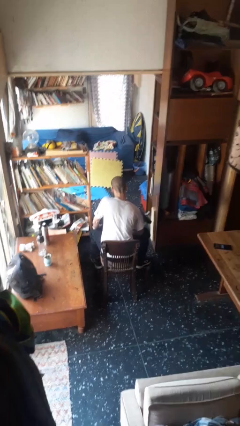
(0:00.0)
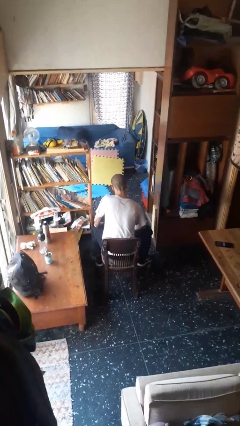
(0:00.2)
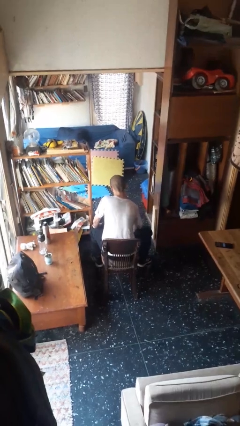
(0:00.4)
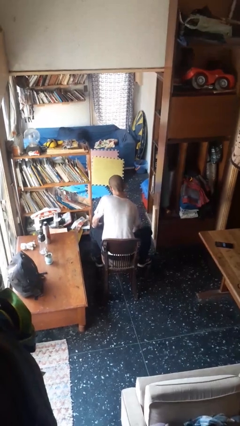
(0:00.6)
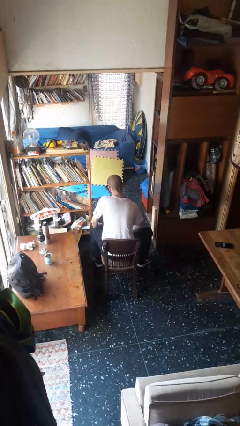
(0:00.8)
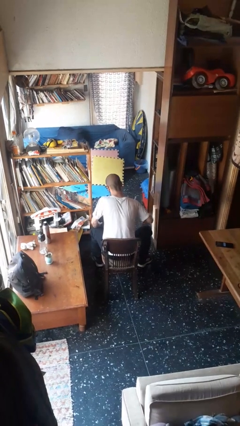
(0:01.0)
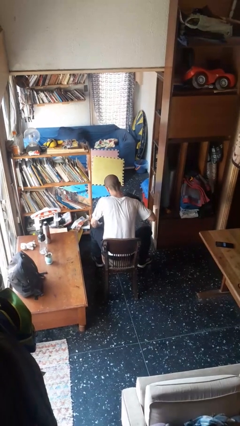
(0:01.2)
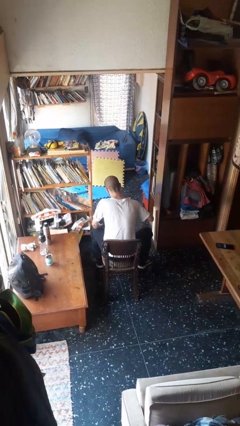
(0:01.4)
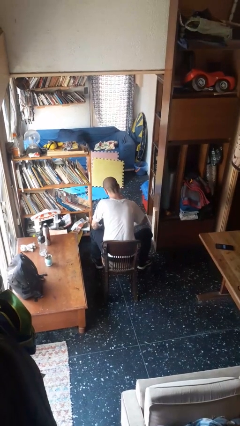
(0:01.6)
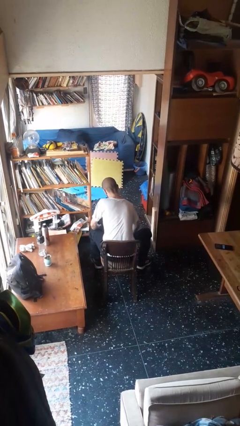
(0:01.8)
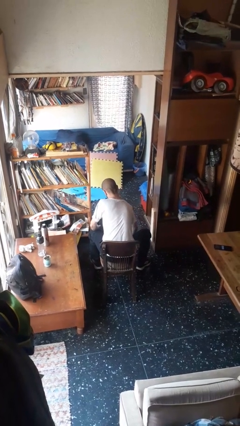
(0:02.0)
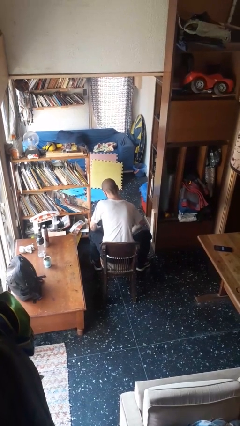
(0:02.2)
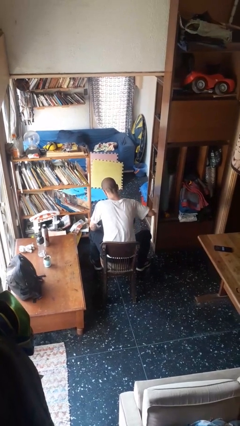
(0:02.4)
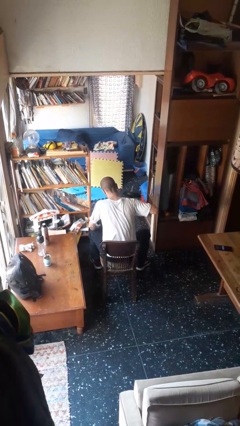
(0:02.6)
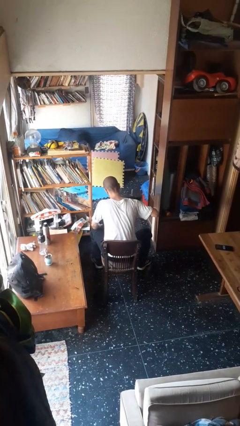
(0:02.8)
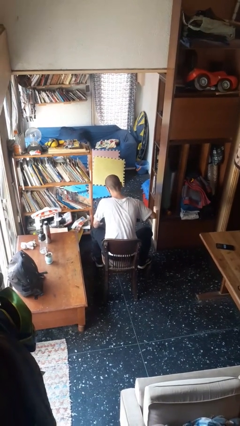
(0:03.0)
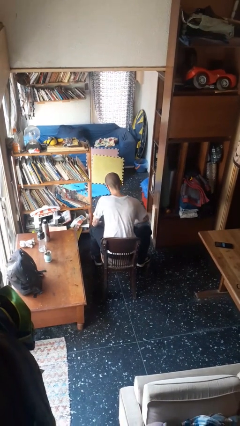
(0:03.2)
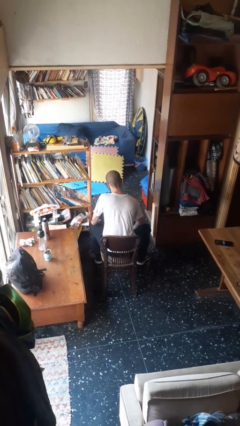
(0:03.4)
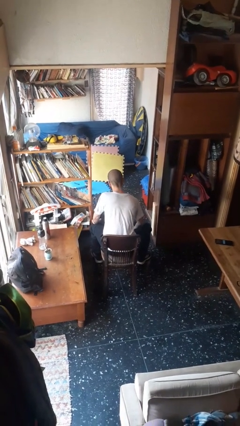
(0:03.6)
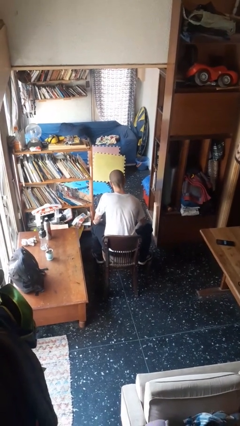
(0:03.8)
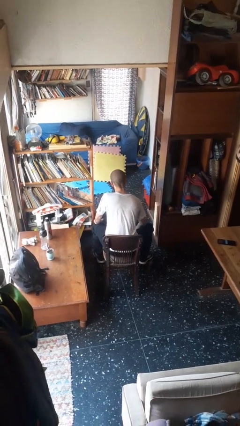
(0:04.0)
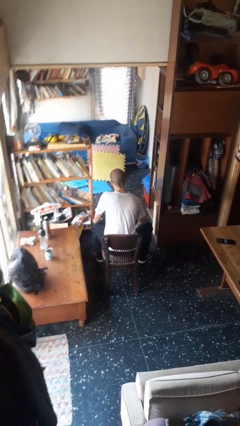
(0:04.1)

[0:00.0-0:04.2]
person lifts dumbbells

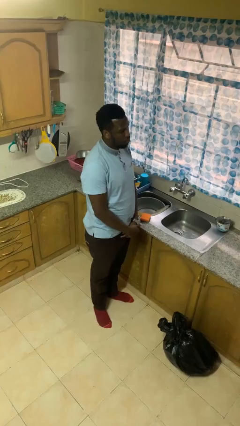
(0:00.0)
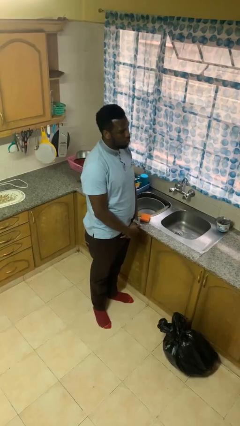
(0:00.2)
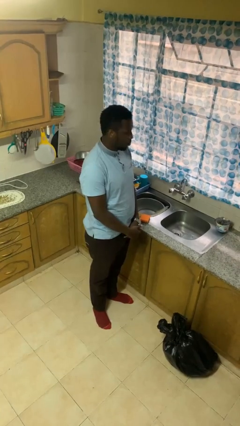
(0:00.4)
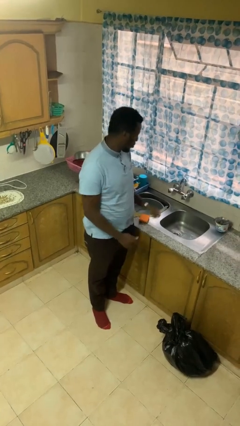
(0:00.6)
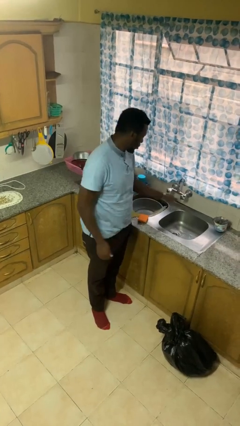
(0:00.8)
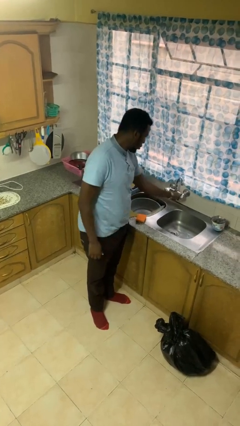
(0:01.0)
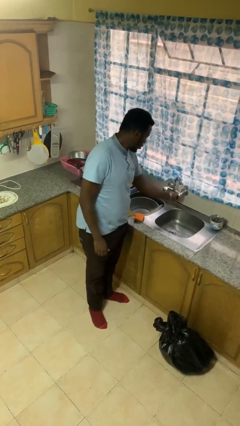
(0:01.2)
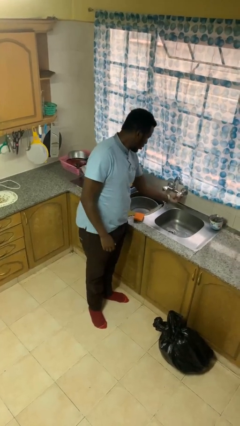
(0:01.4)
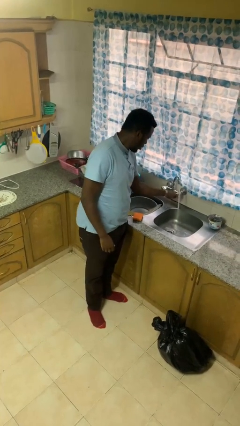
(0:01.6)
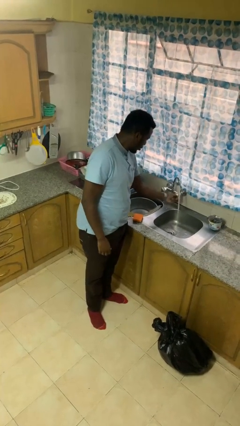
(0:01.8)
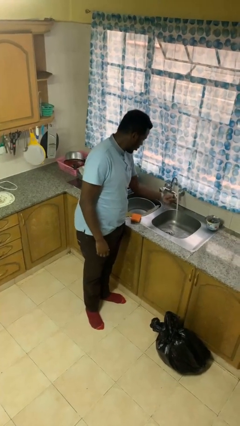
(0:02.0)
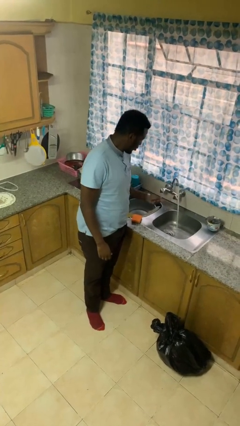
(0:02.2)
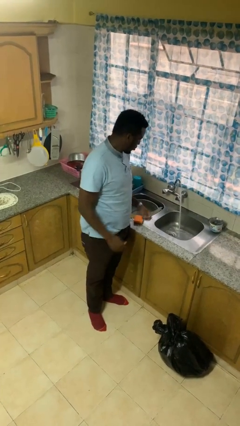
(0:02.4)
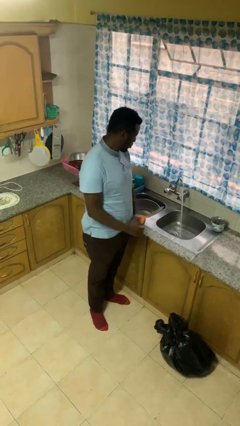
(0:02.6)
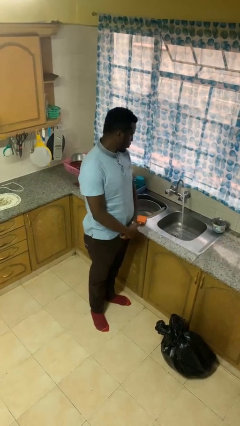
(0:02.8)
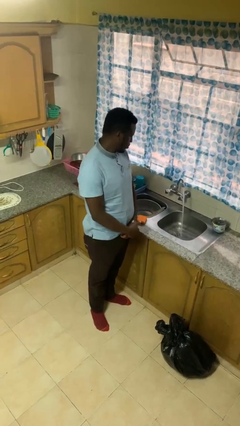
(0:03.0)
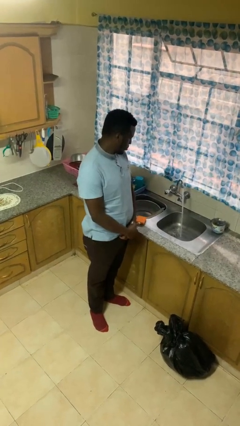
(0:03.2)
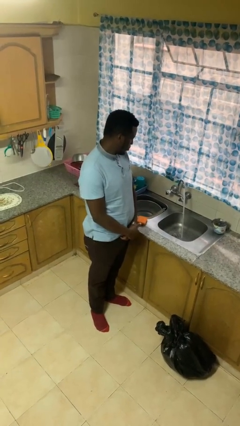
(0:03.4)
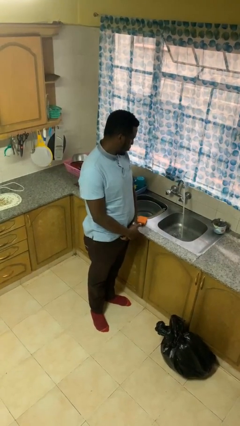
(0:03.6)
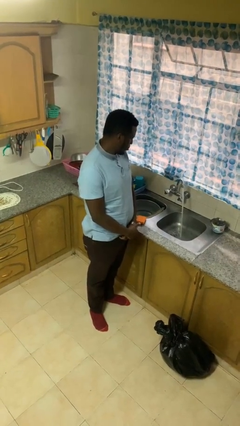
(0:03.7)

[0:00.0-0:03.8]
person turns on faucet

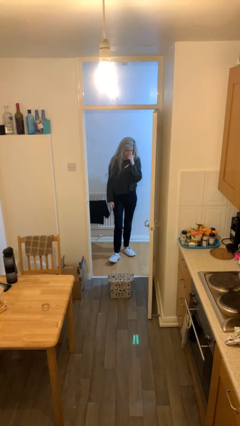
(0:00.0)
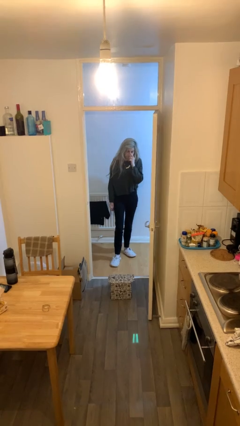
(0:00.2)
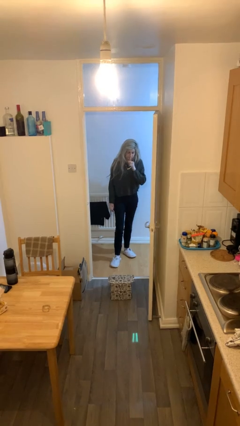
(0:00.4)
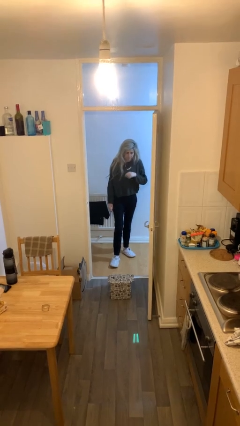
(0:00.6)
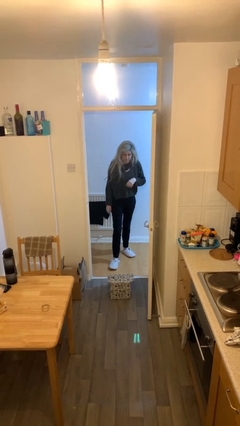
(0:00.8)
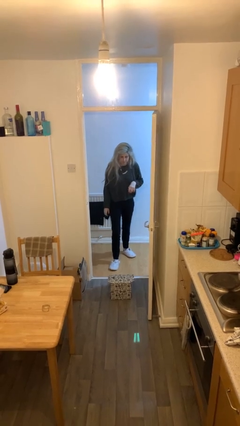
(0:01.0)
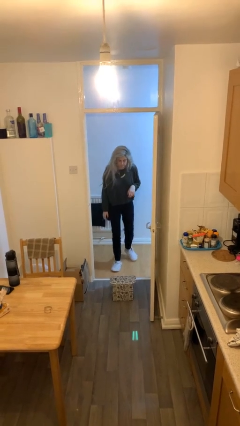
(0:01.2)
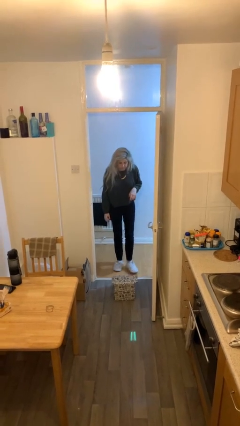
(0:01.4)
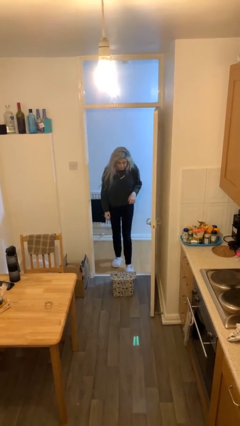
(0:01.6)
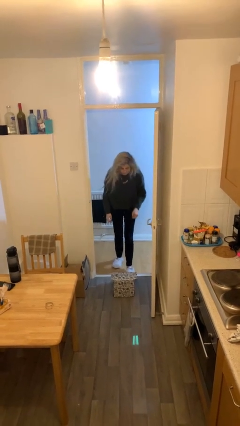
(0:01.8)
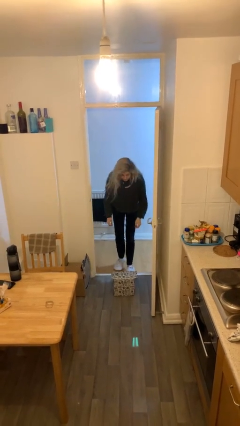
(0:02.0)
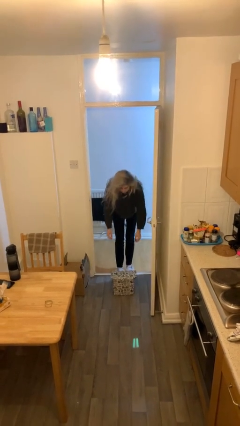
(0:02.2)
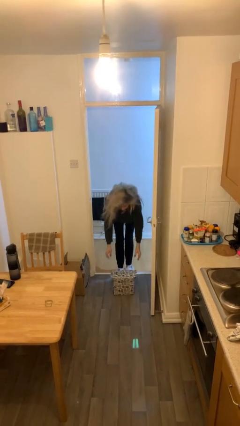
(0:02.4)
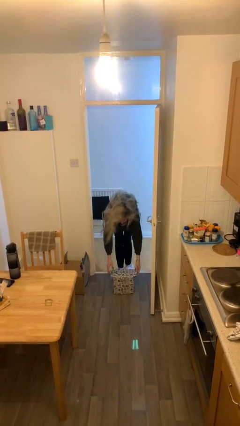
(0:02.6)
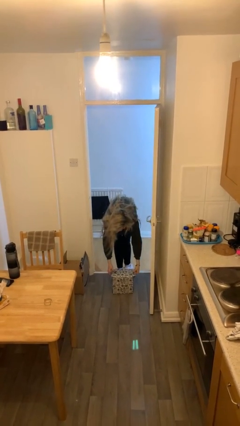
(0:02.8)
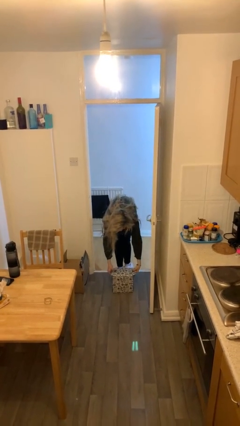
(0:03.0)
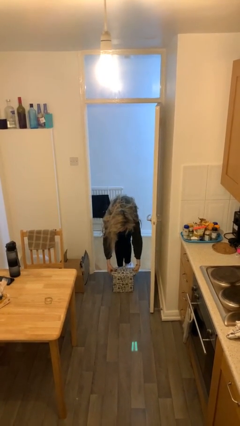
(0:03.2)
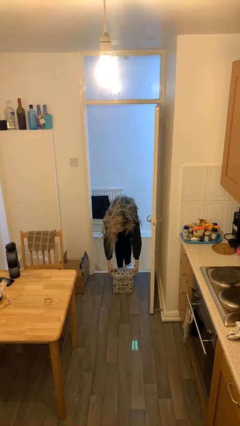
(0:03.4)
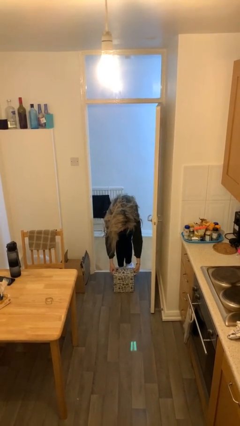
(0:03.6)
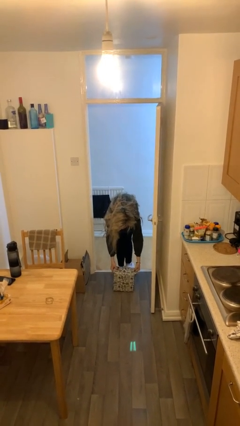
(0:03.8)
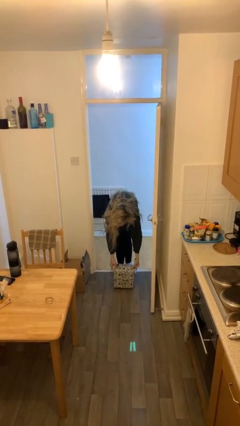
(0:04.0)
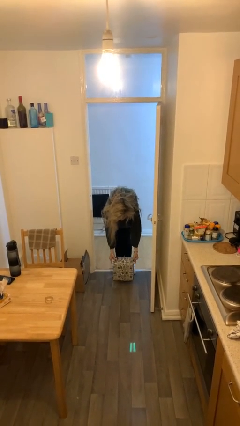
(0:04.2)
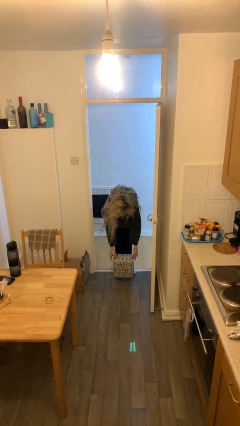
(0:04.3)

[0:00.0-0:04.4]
person picks up object from floor

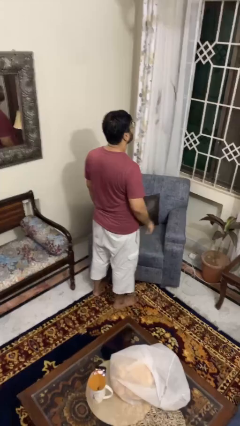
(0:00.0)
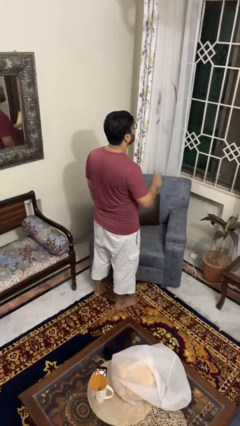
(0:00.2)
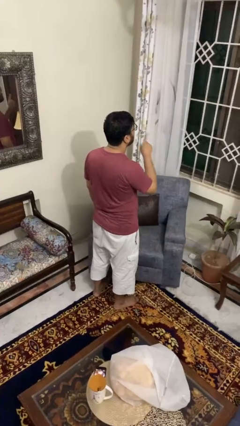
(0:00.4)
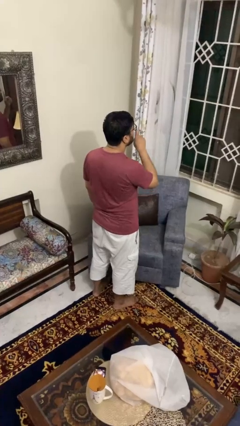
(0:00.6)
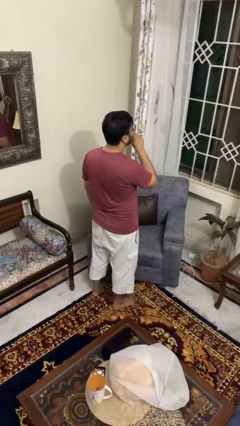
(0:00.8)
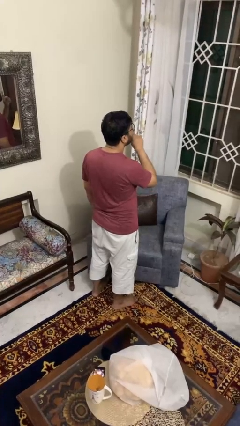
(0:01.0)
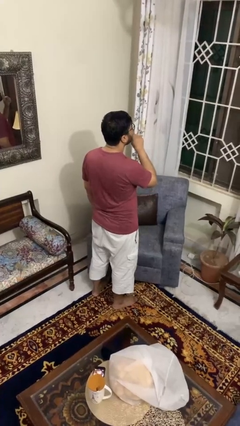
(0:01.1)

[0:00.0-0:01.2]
person gestures be quiet

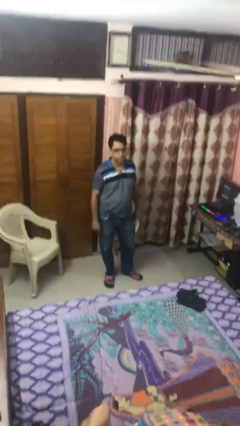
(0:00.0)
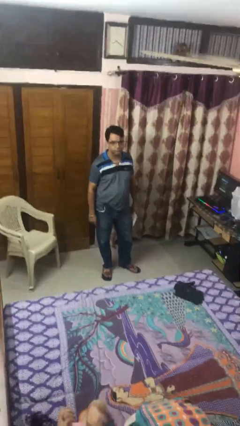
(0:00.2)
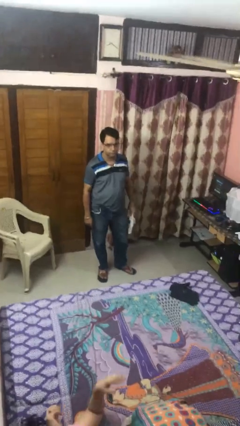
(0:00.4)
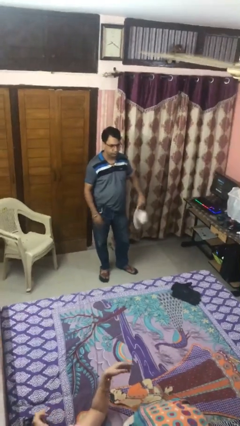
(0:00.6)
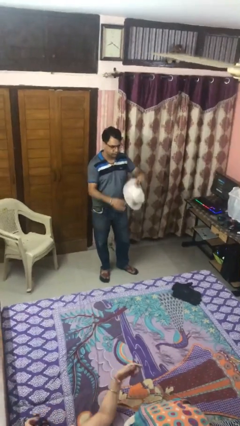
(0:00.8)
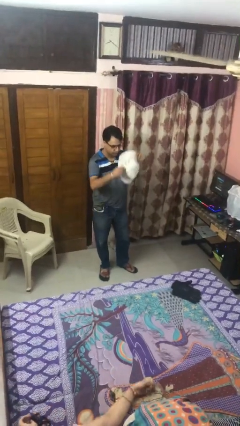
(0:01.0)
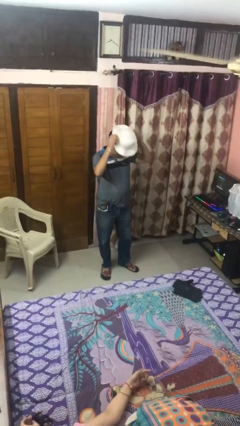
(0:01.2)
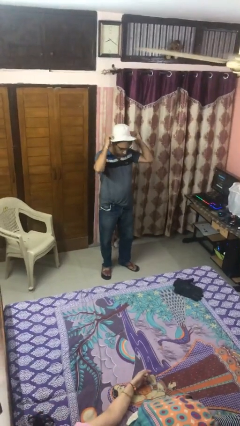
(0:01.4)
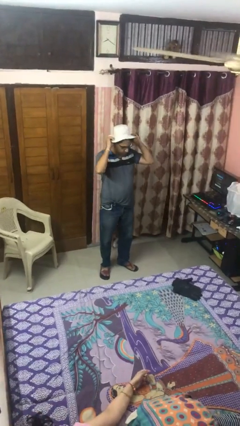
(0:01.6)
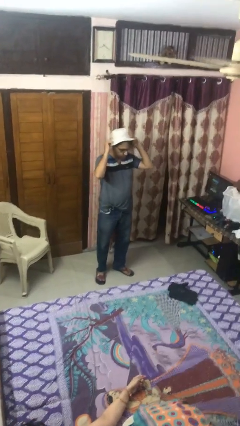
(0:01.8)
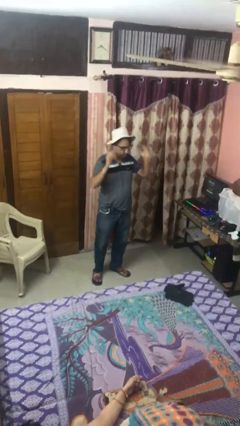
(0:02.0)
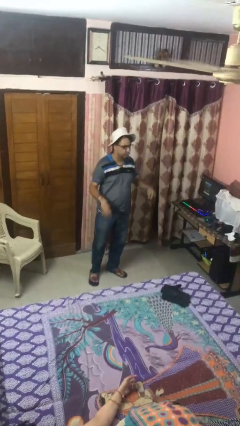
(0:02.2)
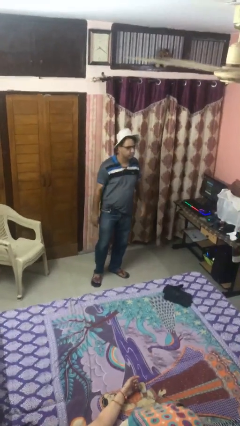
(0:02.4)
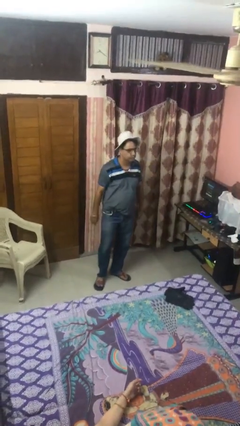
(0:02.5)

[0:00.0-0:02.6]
person puts on hat

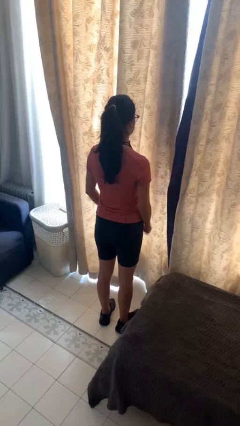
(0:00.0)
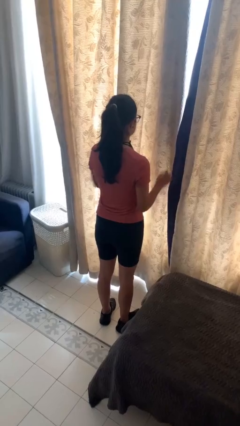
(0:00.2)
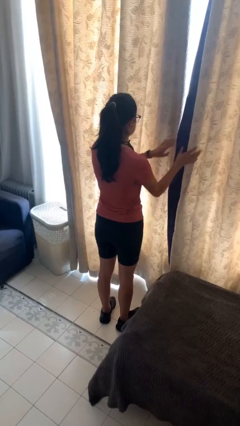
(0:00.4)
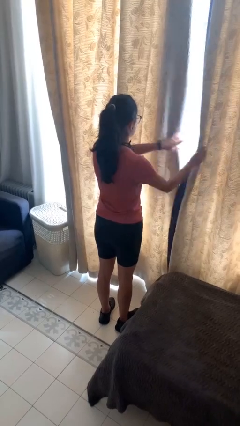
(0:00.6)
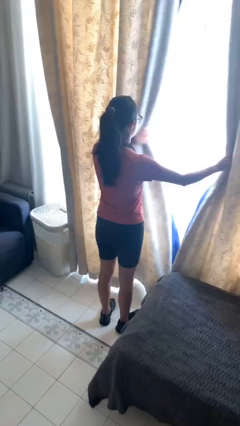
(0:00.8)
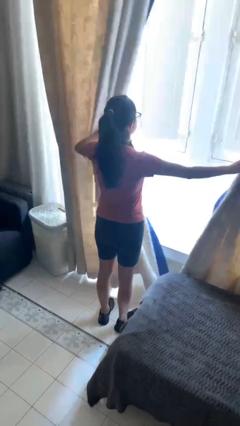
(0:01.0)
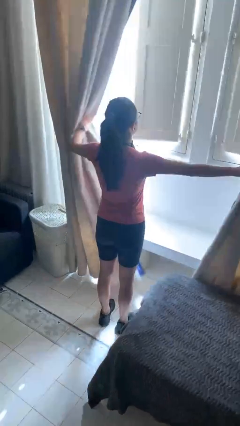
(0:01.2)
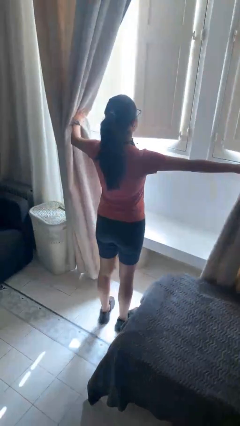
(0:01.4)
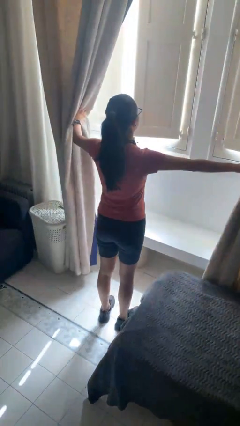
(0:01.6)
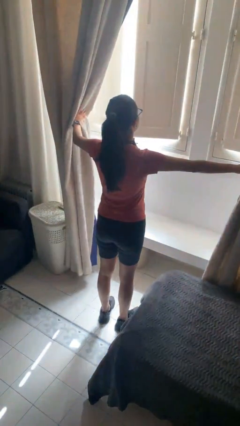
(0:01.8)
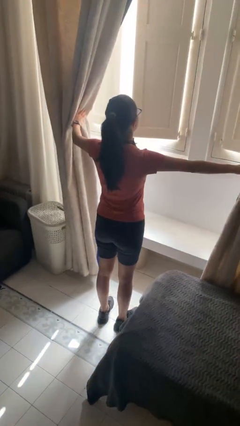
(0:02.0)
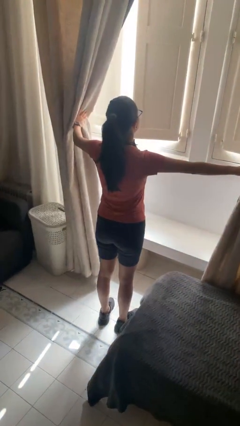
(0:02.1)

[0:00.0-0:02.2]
person opens curtains
